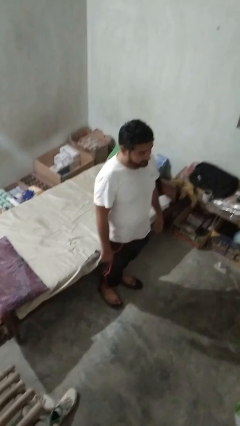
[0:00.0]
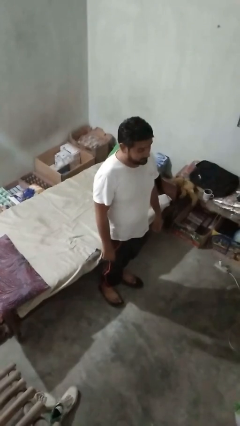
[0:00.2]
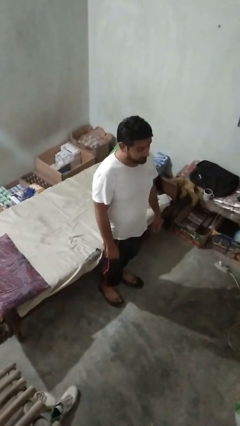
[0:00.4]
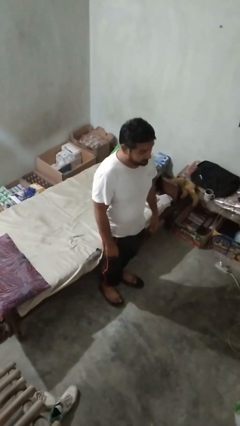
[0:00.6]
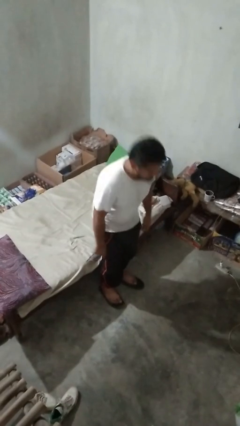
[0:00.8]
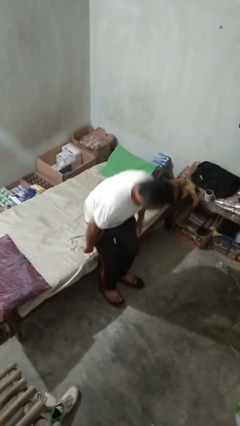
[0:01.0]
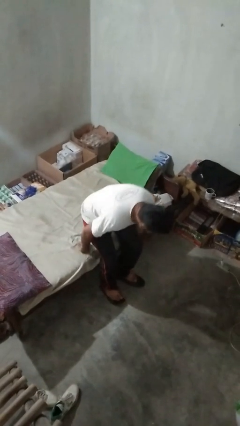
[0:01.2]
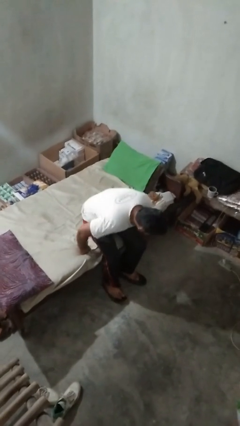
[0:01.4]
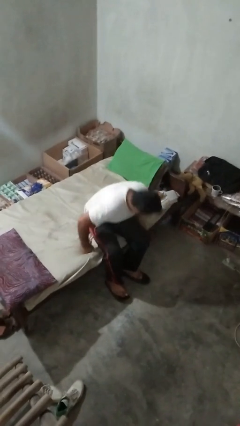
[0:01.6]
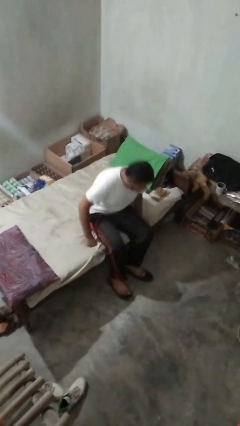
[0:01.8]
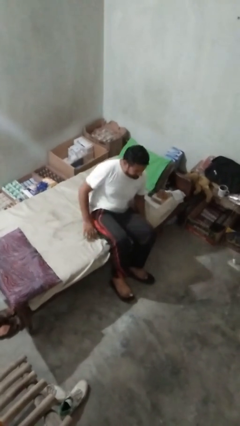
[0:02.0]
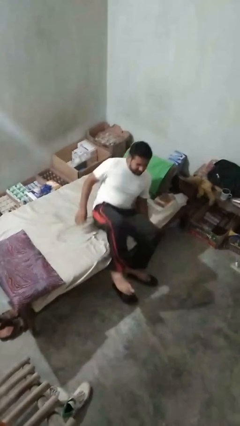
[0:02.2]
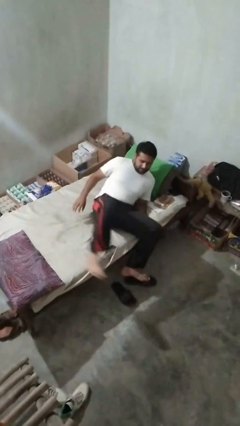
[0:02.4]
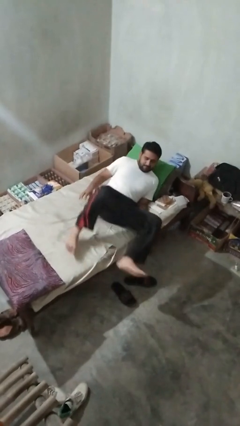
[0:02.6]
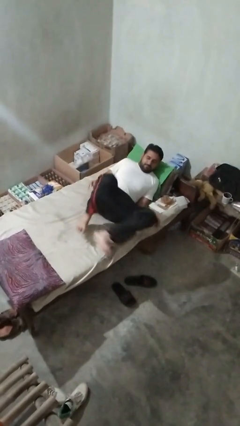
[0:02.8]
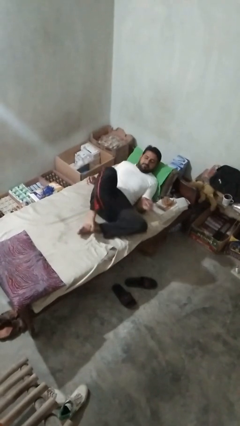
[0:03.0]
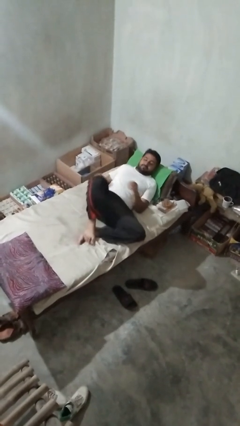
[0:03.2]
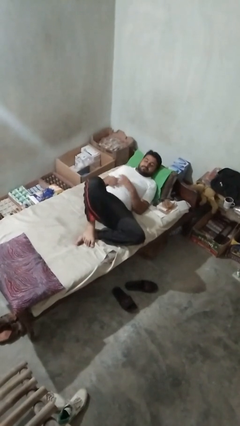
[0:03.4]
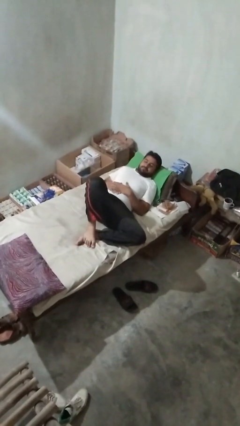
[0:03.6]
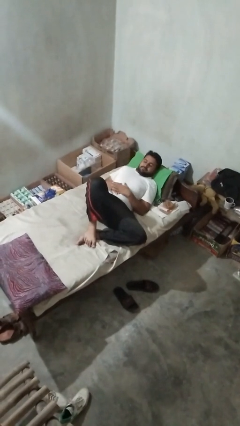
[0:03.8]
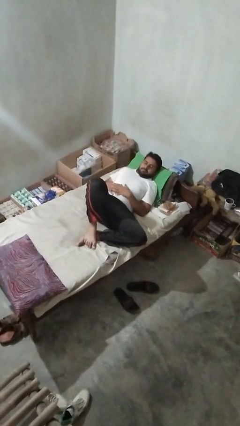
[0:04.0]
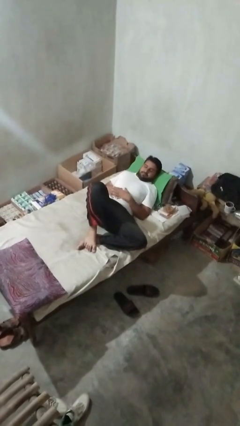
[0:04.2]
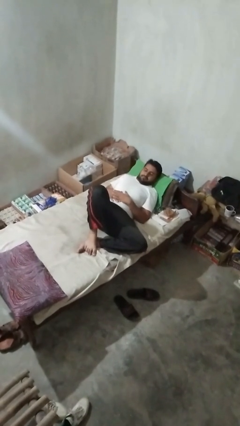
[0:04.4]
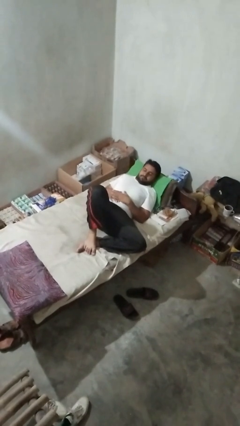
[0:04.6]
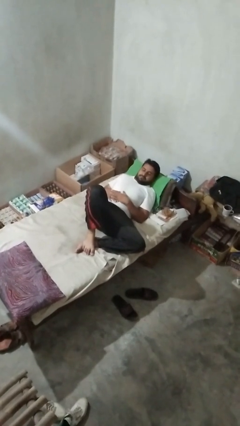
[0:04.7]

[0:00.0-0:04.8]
person lies down on bed

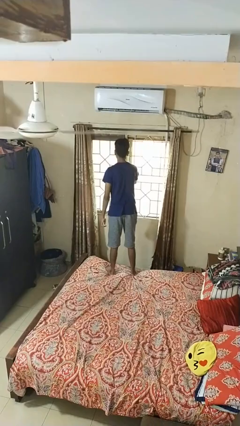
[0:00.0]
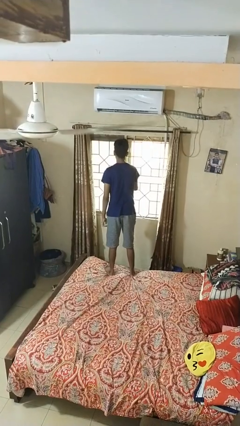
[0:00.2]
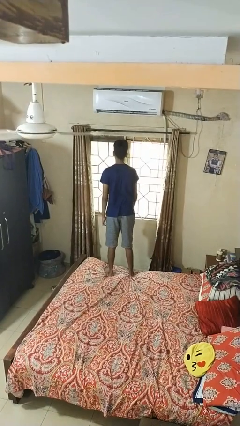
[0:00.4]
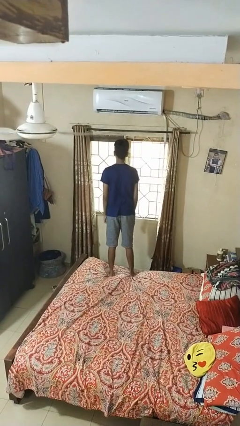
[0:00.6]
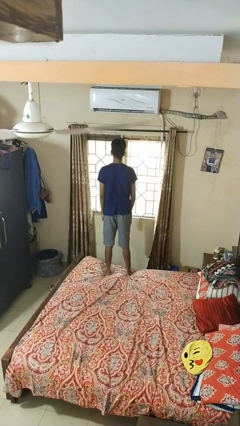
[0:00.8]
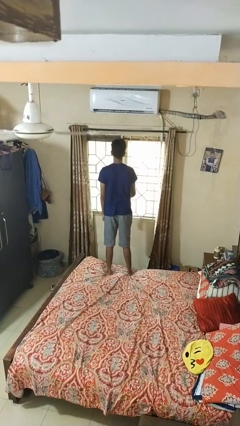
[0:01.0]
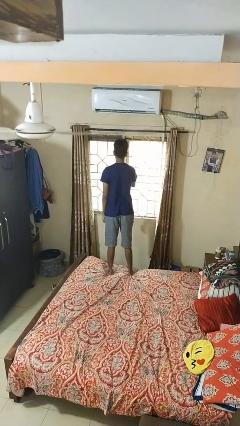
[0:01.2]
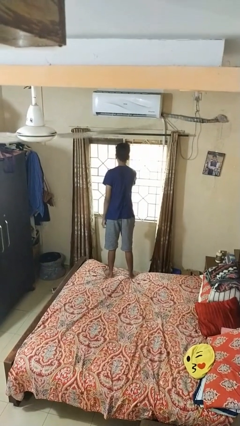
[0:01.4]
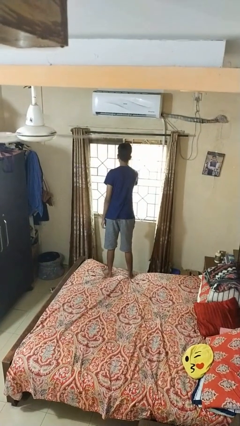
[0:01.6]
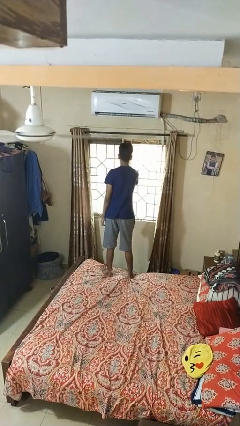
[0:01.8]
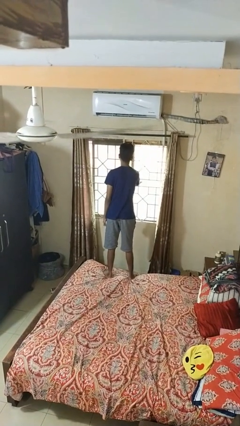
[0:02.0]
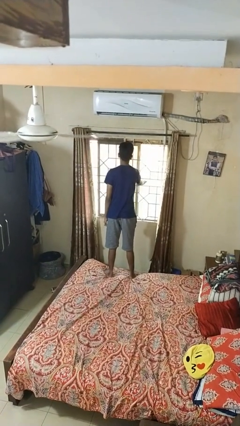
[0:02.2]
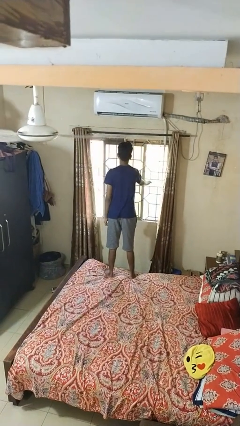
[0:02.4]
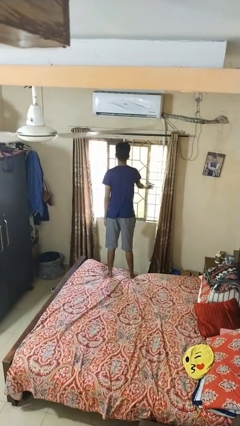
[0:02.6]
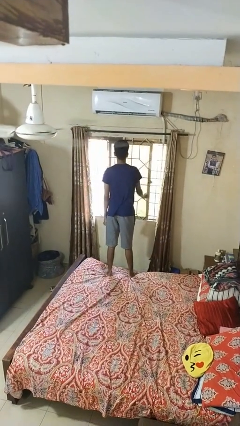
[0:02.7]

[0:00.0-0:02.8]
person opens home window

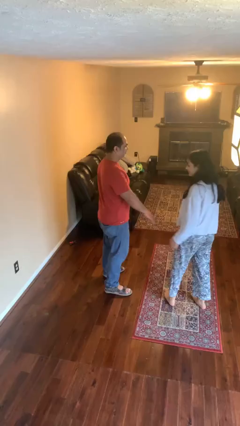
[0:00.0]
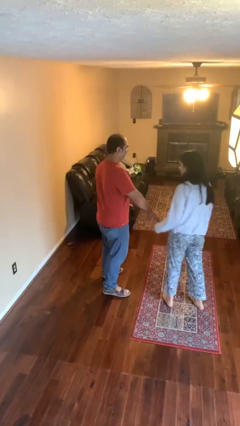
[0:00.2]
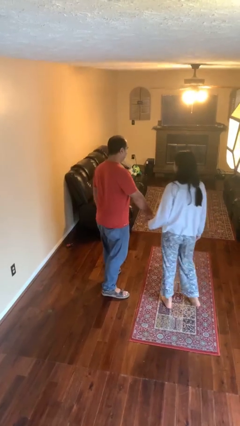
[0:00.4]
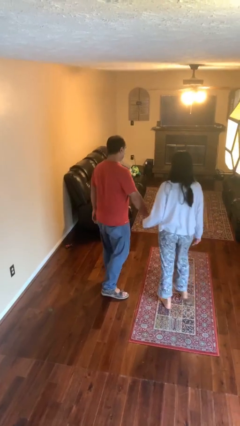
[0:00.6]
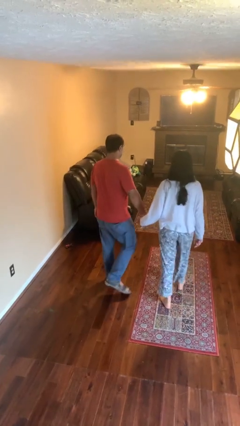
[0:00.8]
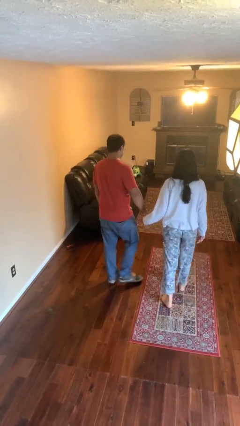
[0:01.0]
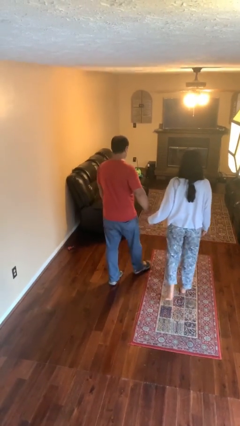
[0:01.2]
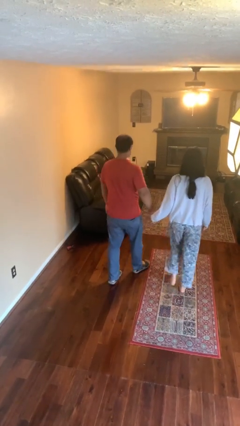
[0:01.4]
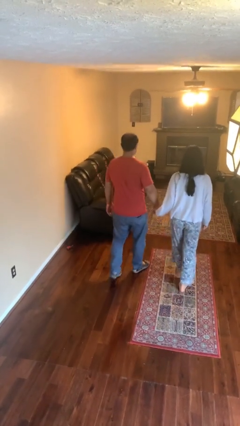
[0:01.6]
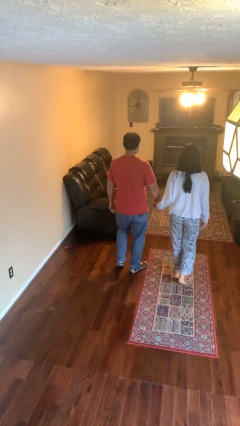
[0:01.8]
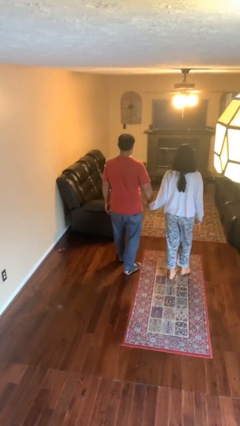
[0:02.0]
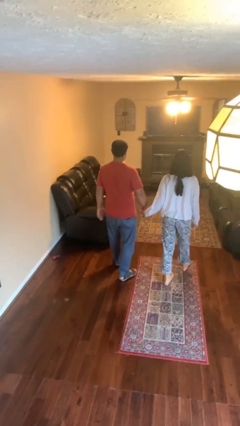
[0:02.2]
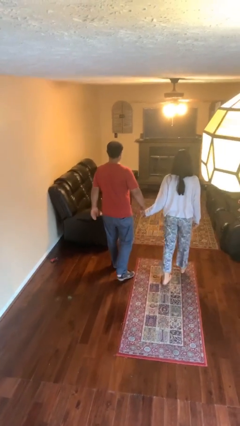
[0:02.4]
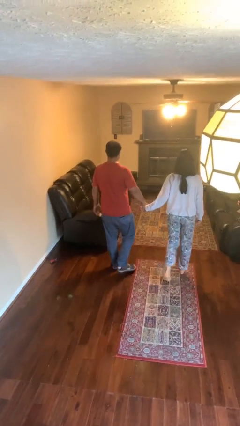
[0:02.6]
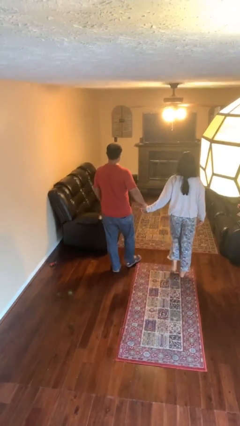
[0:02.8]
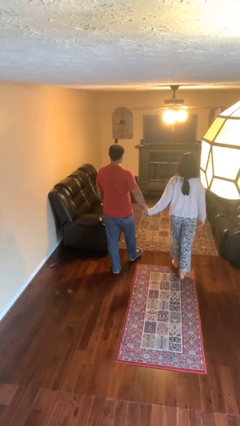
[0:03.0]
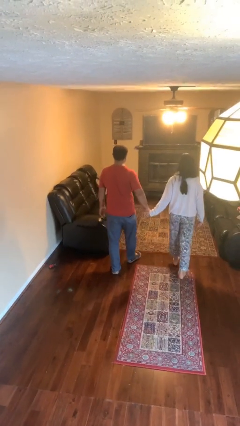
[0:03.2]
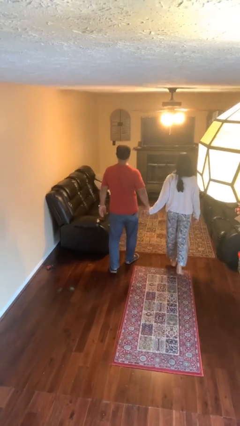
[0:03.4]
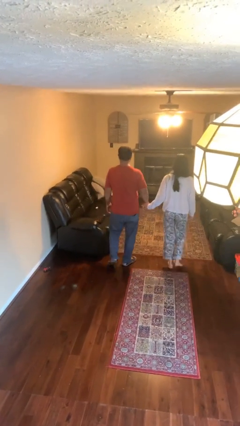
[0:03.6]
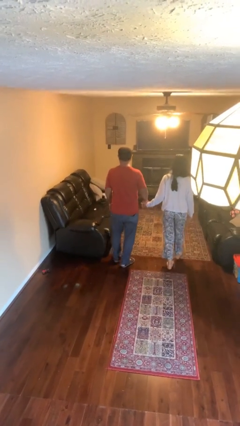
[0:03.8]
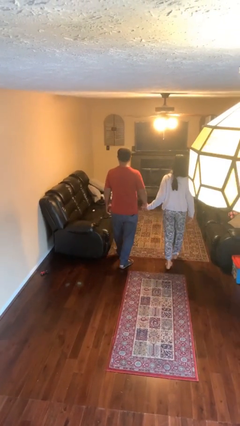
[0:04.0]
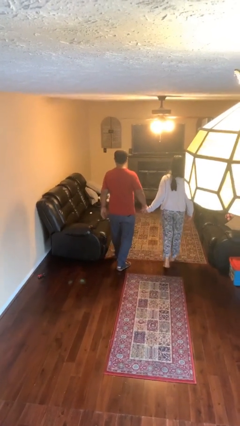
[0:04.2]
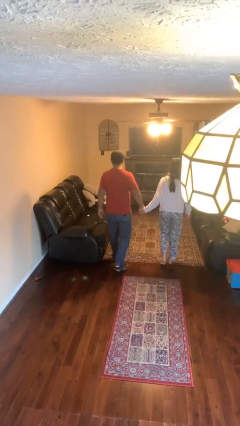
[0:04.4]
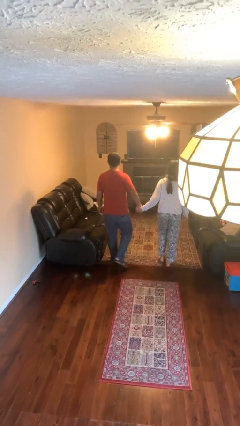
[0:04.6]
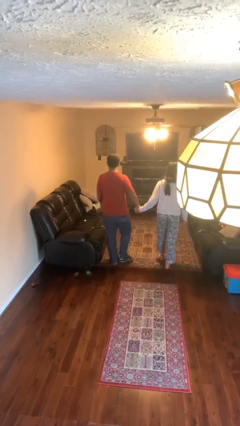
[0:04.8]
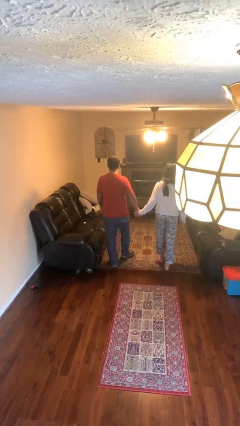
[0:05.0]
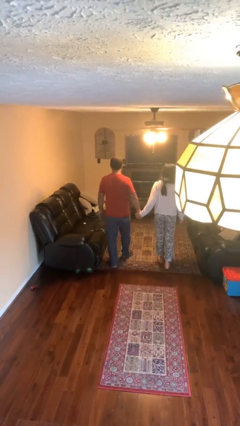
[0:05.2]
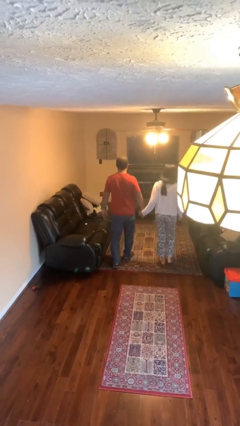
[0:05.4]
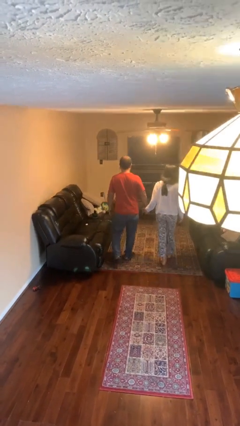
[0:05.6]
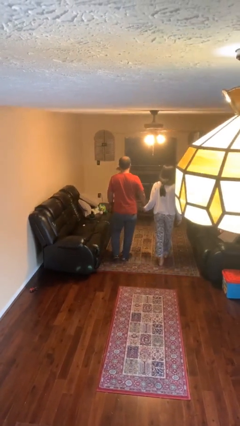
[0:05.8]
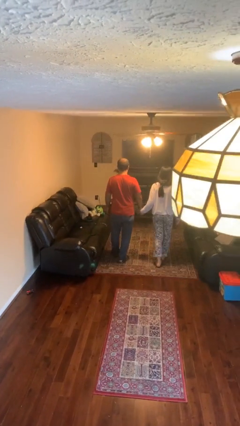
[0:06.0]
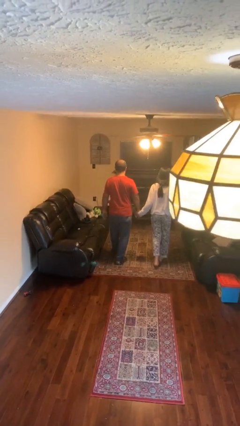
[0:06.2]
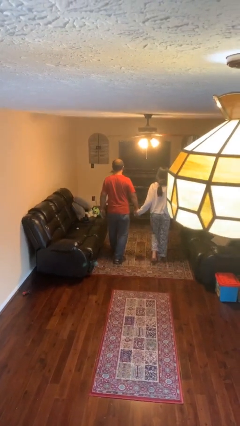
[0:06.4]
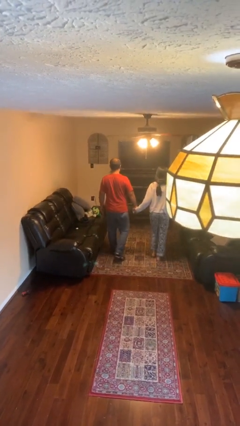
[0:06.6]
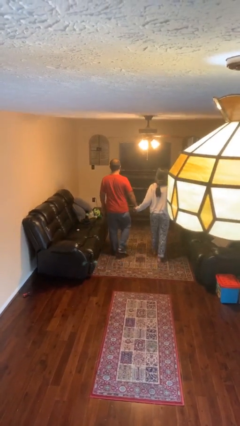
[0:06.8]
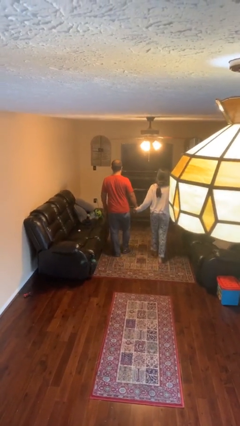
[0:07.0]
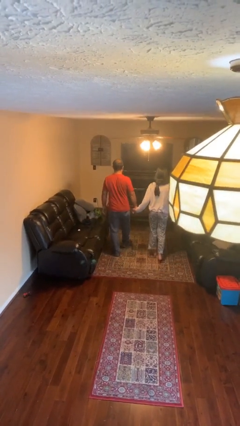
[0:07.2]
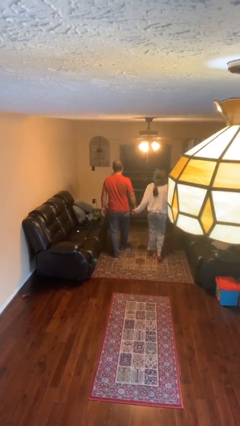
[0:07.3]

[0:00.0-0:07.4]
person holds hand

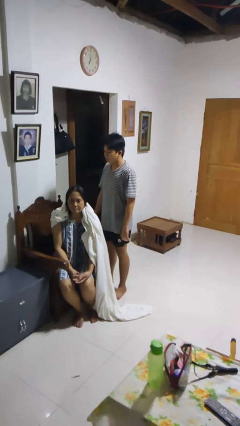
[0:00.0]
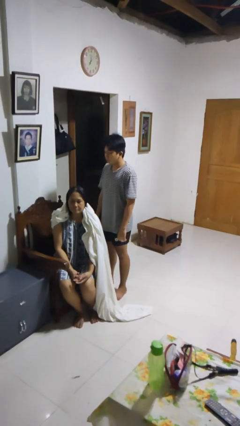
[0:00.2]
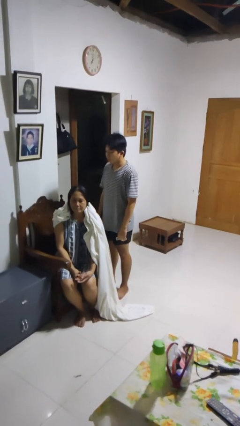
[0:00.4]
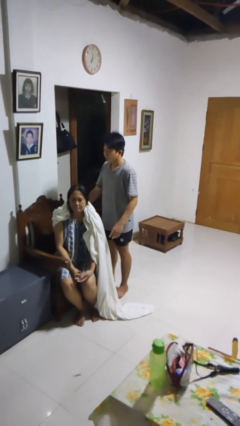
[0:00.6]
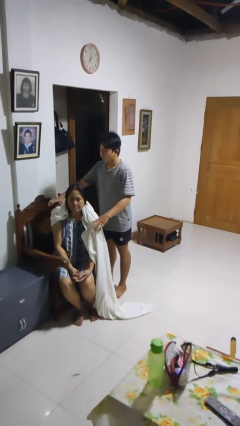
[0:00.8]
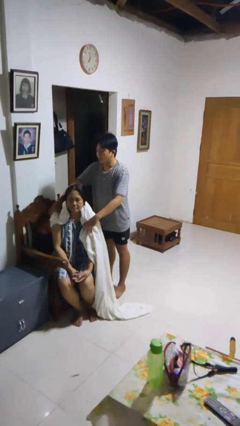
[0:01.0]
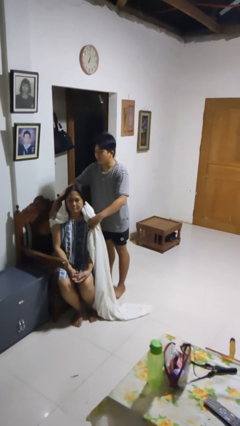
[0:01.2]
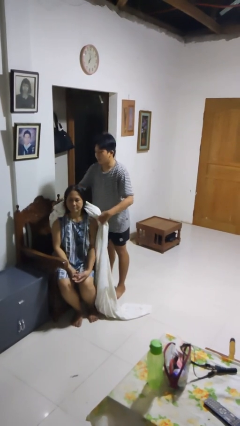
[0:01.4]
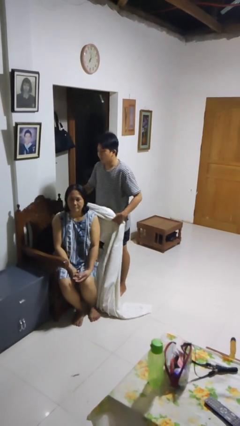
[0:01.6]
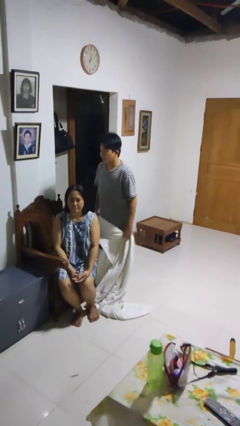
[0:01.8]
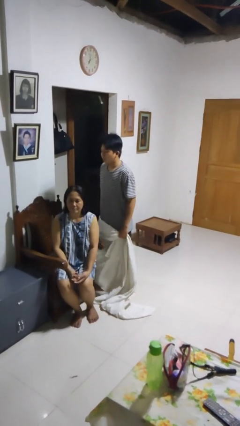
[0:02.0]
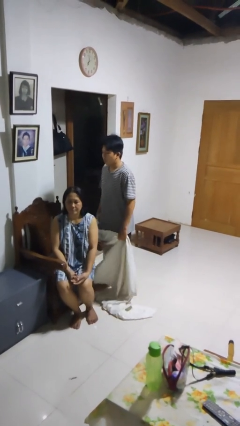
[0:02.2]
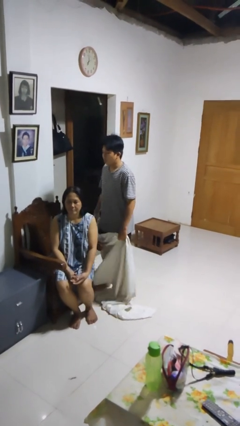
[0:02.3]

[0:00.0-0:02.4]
person uncovers friend with blanket
